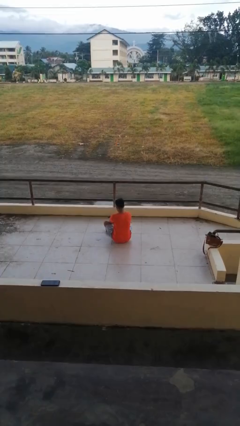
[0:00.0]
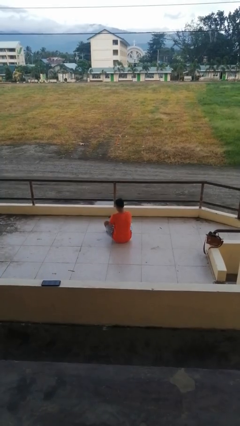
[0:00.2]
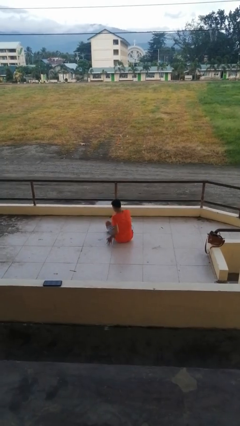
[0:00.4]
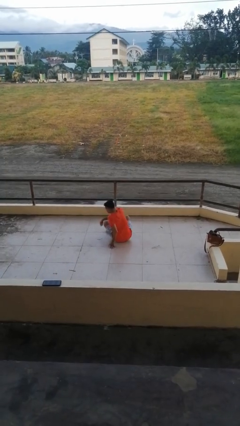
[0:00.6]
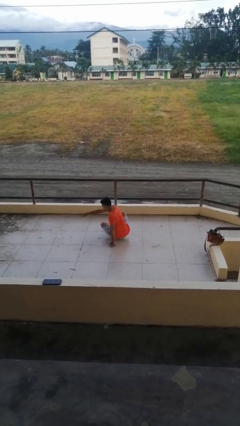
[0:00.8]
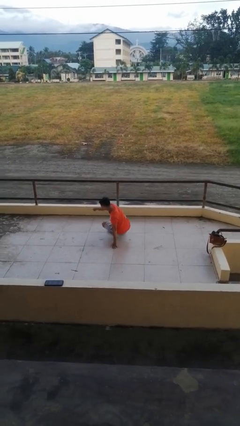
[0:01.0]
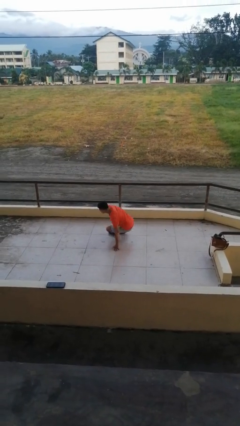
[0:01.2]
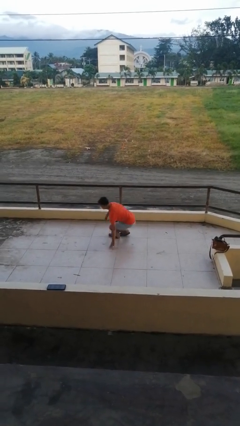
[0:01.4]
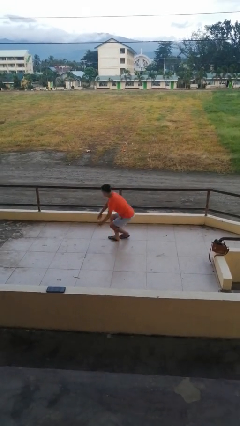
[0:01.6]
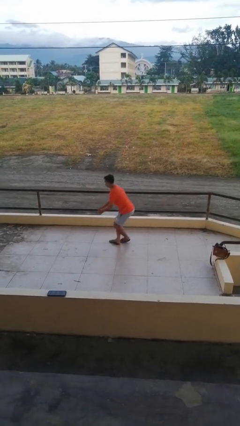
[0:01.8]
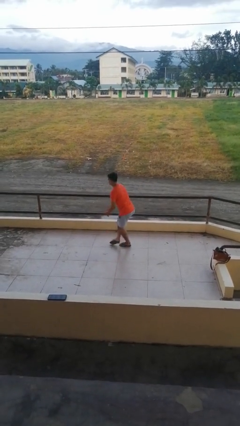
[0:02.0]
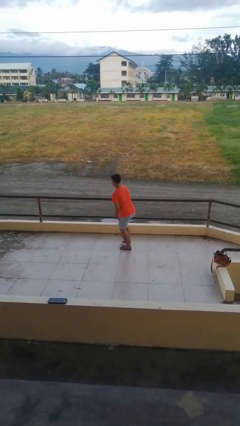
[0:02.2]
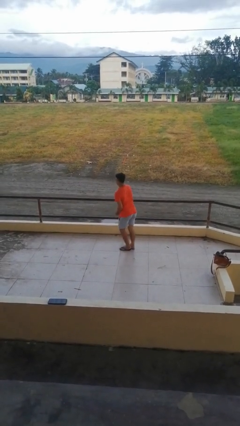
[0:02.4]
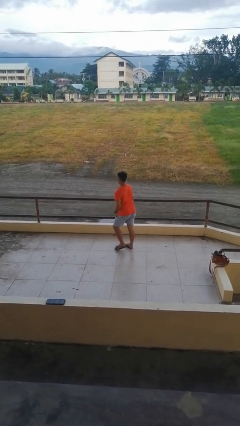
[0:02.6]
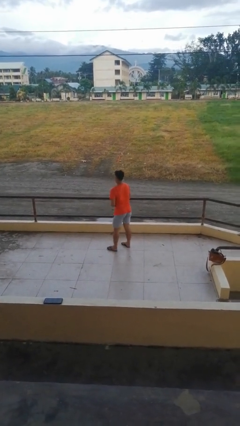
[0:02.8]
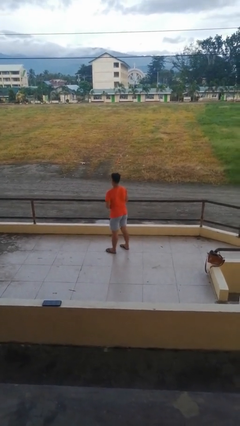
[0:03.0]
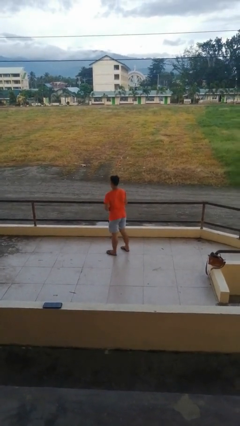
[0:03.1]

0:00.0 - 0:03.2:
person stands up from floor

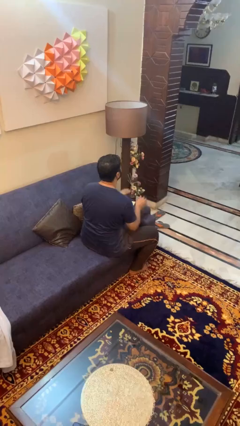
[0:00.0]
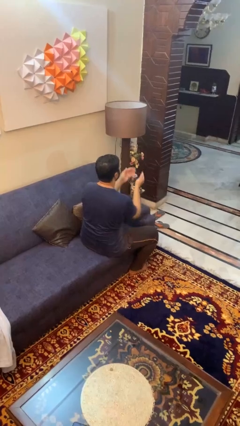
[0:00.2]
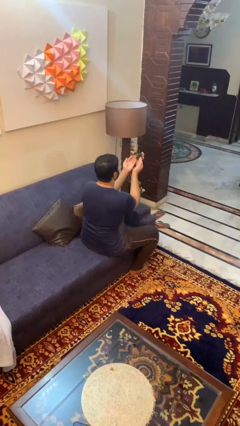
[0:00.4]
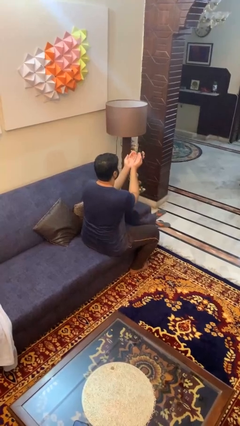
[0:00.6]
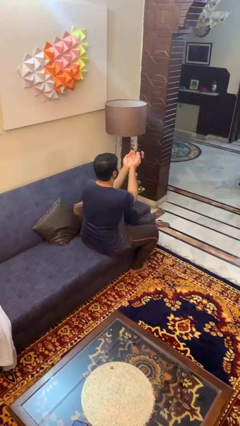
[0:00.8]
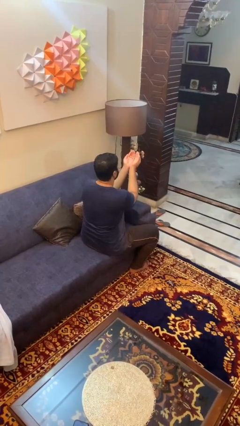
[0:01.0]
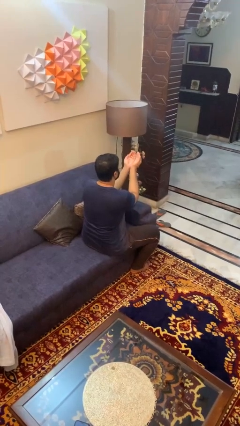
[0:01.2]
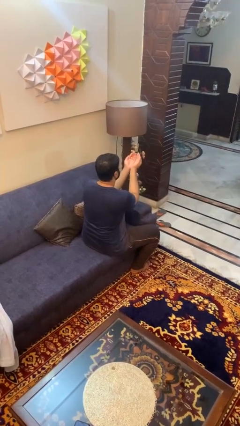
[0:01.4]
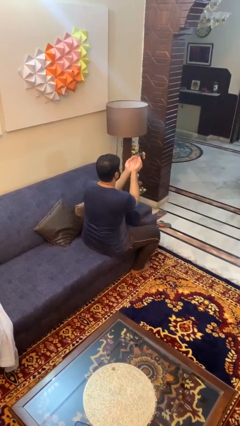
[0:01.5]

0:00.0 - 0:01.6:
person prays

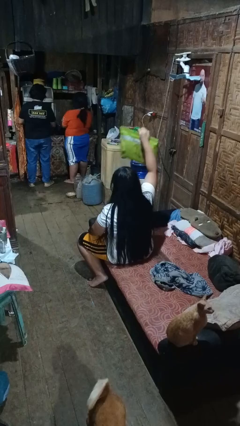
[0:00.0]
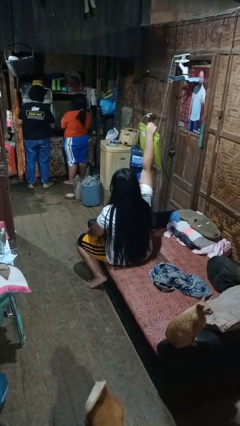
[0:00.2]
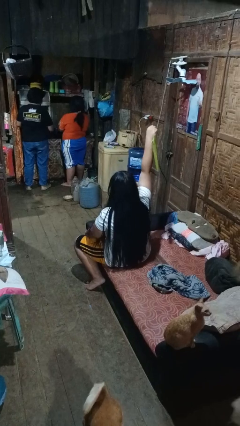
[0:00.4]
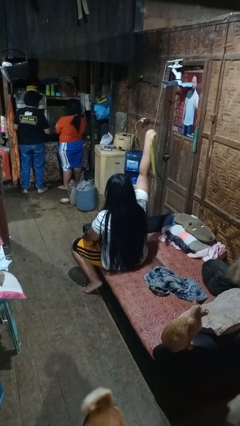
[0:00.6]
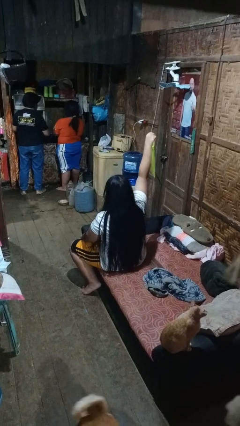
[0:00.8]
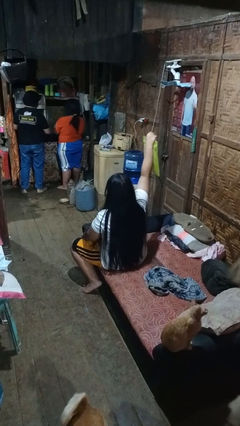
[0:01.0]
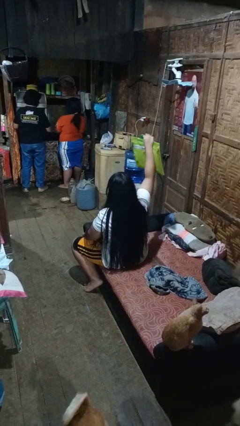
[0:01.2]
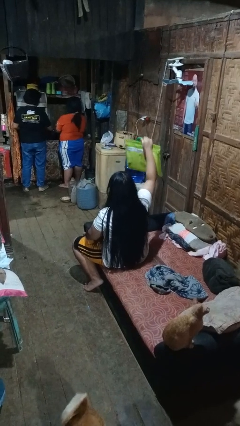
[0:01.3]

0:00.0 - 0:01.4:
person holds object above head

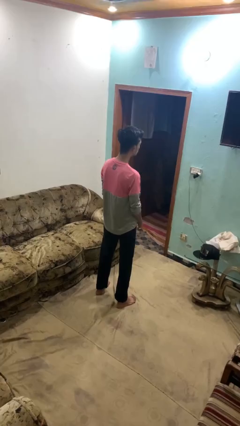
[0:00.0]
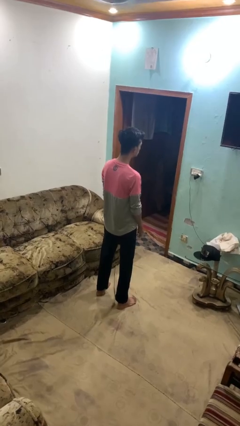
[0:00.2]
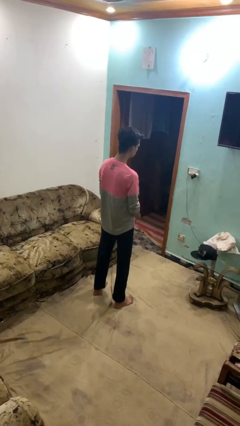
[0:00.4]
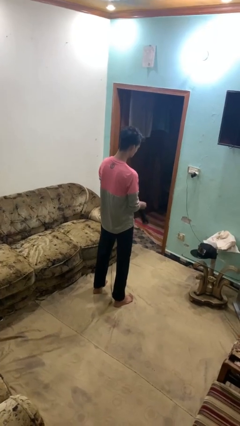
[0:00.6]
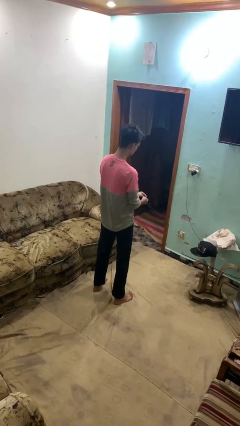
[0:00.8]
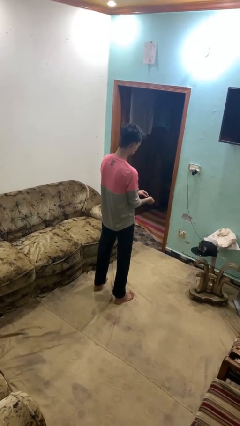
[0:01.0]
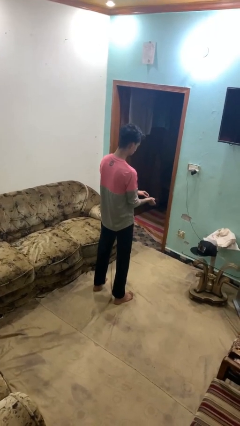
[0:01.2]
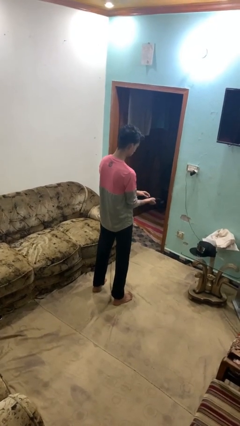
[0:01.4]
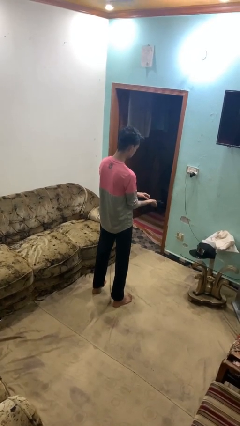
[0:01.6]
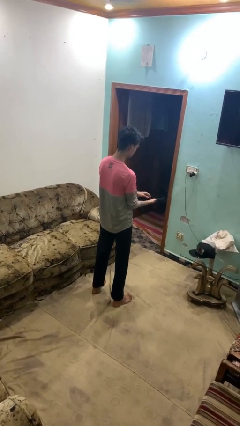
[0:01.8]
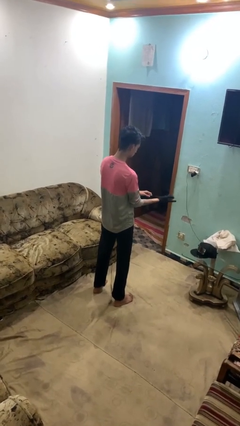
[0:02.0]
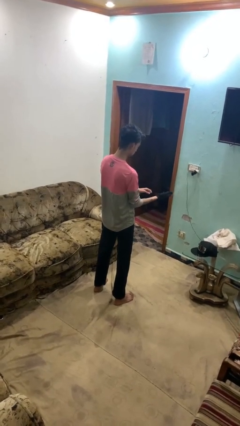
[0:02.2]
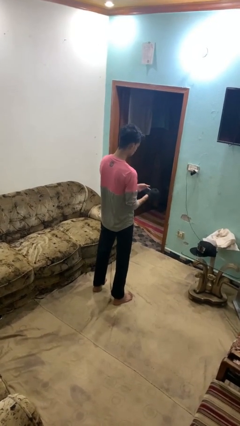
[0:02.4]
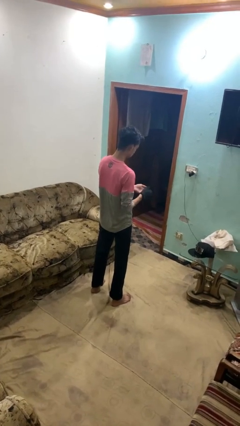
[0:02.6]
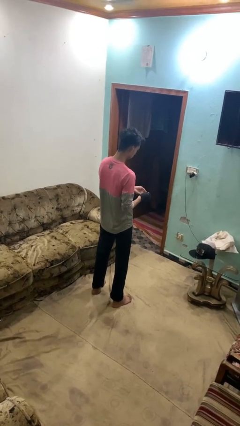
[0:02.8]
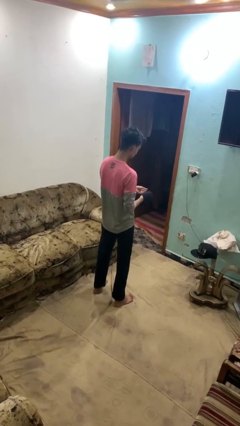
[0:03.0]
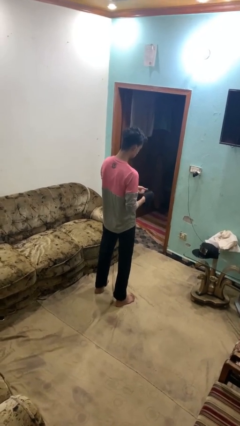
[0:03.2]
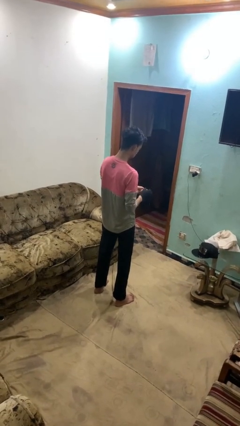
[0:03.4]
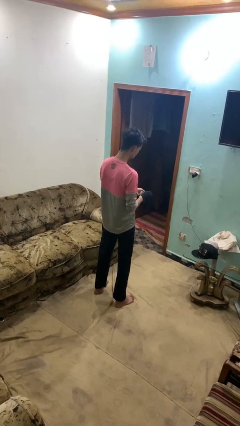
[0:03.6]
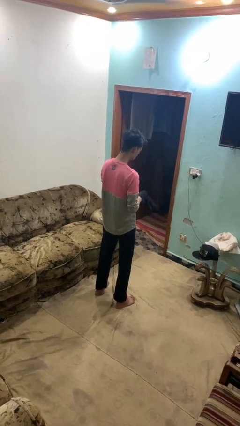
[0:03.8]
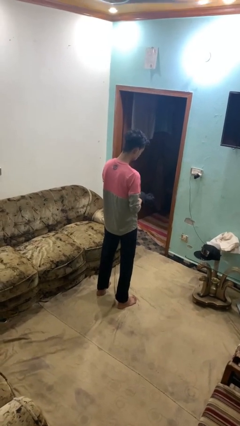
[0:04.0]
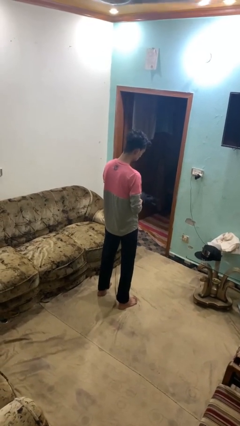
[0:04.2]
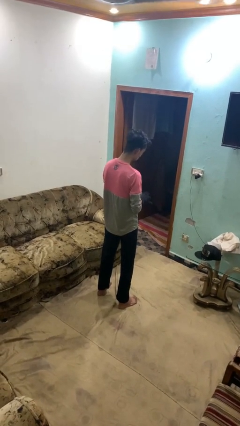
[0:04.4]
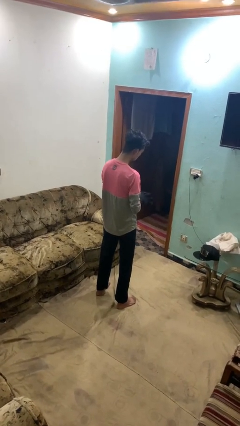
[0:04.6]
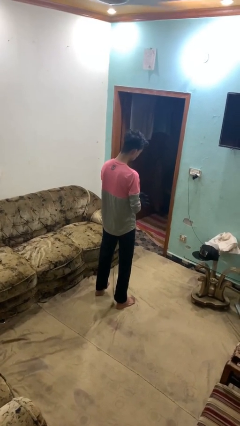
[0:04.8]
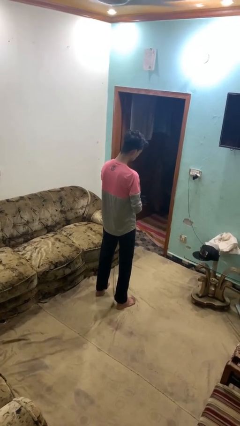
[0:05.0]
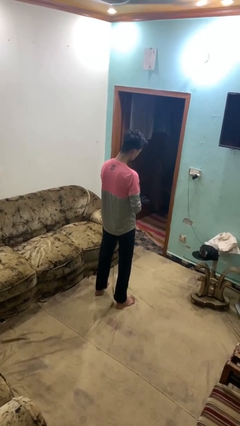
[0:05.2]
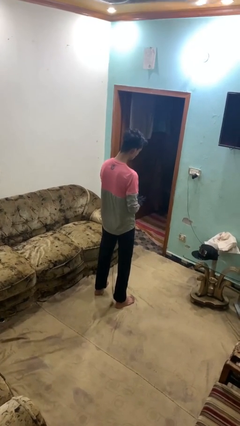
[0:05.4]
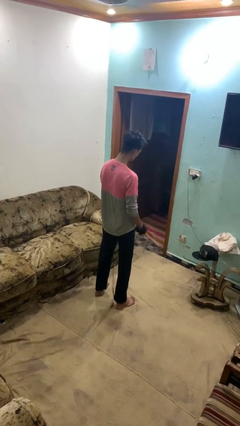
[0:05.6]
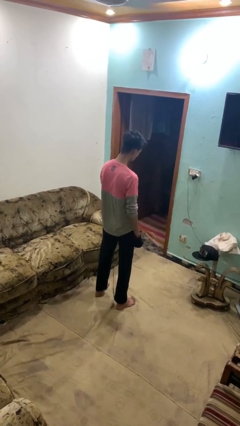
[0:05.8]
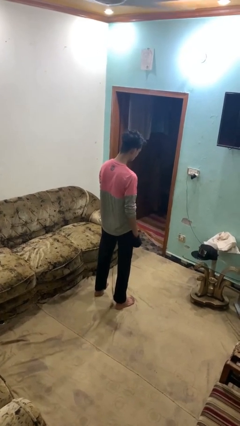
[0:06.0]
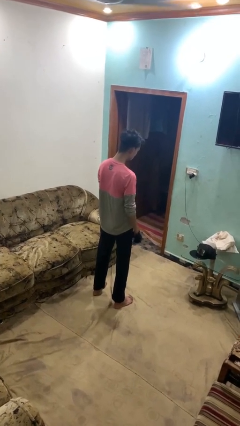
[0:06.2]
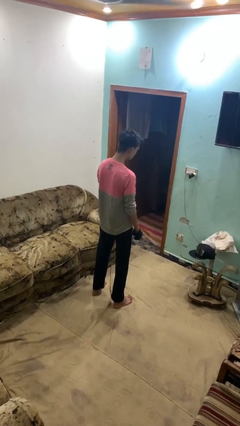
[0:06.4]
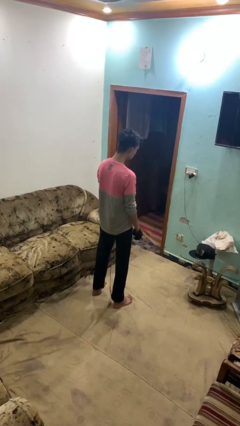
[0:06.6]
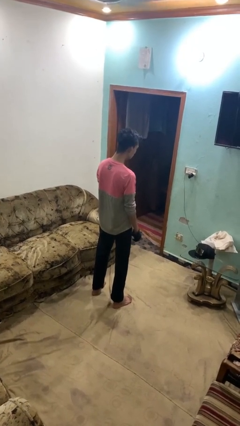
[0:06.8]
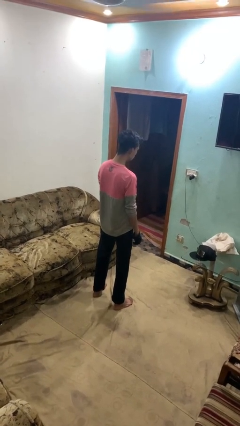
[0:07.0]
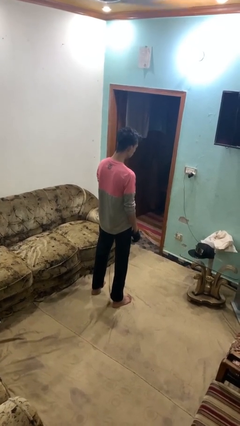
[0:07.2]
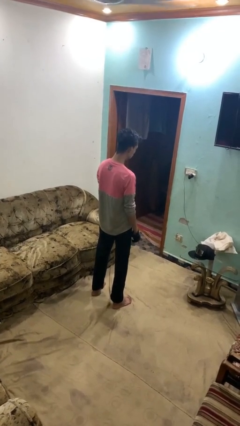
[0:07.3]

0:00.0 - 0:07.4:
person puts on gloves

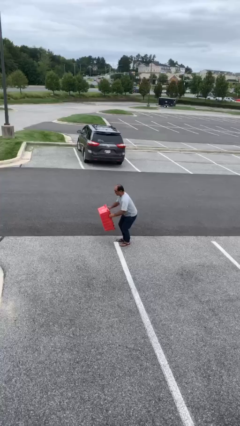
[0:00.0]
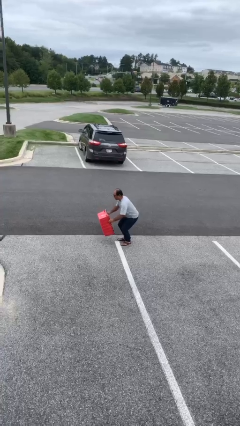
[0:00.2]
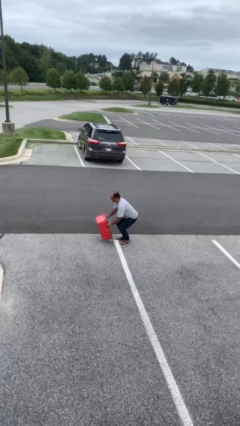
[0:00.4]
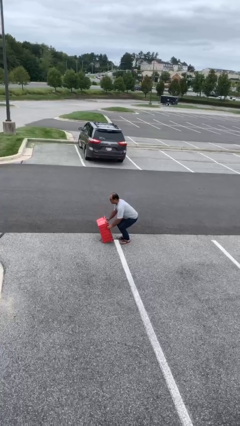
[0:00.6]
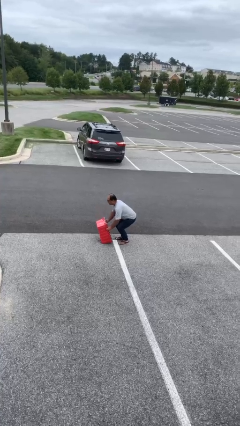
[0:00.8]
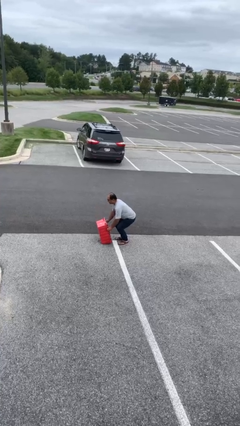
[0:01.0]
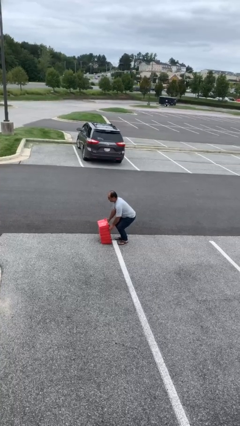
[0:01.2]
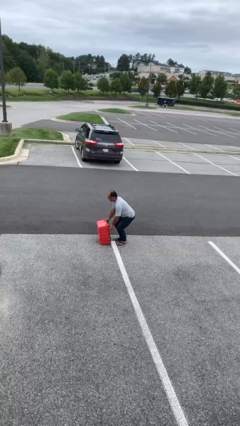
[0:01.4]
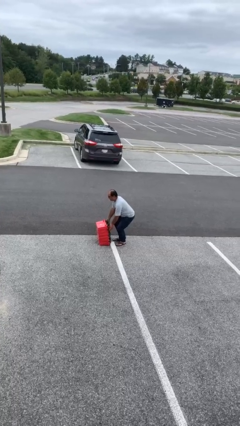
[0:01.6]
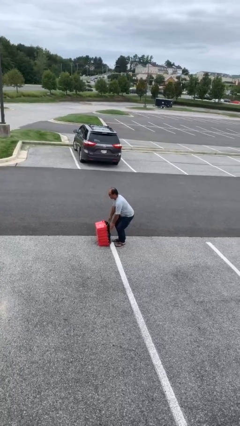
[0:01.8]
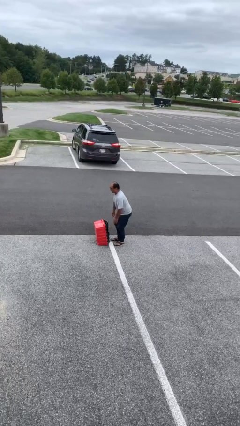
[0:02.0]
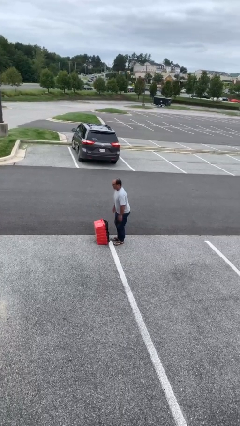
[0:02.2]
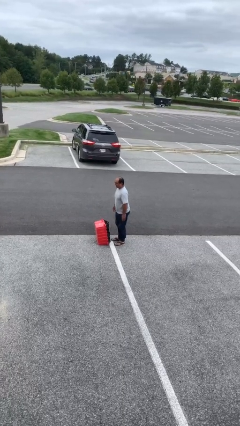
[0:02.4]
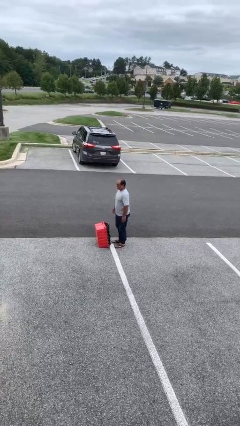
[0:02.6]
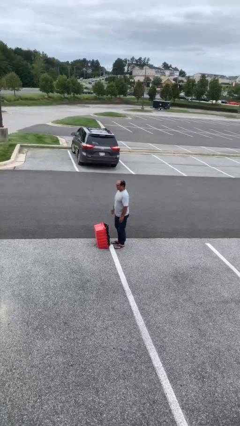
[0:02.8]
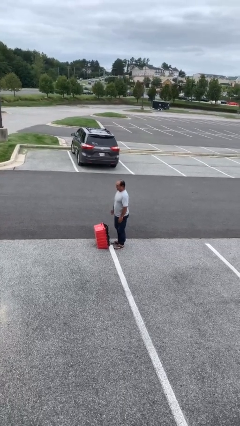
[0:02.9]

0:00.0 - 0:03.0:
person puts down object on floor

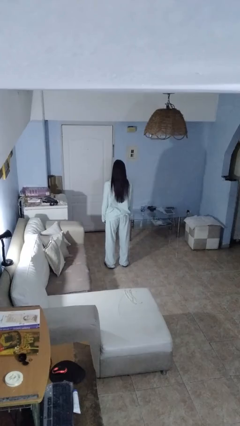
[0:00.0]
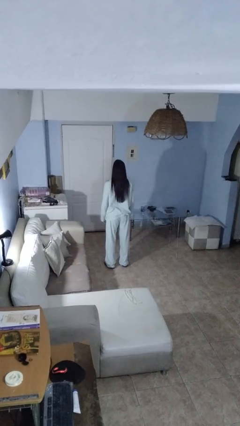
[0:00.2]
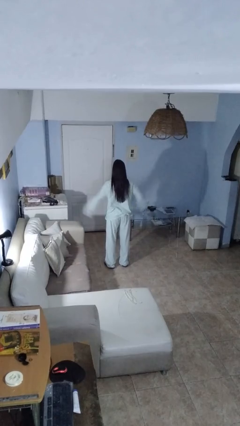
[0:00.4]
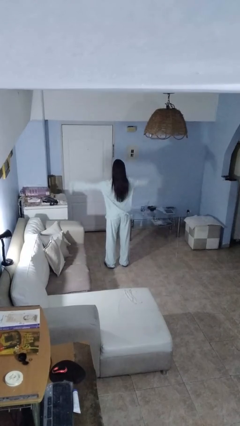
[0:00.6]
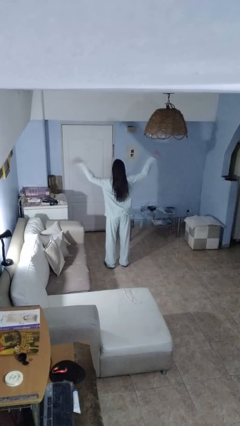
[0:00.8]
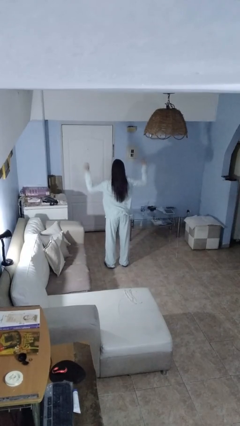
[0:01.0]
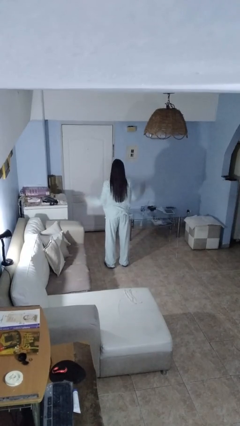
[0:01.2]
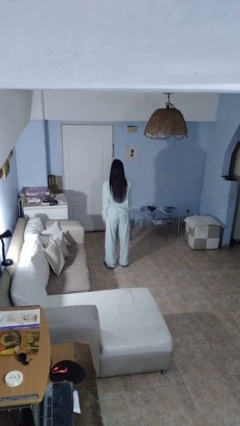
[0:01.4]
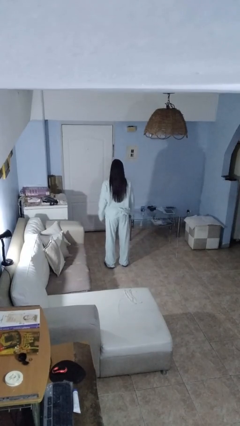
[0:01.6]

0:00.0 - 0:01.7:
person slaps hands on thighs
